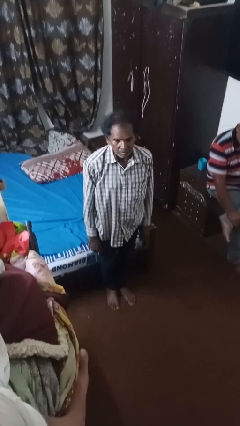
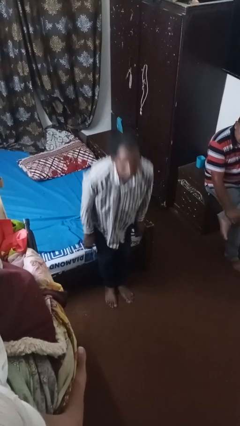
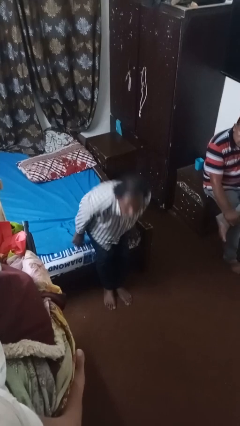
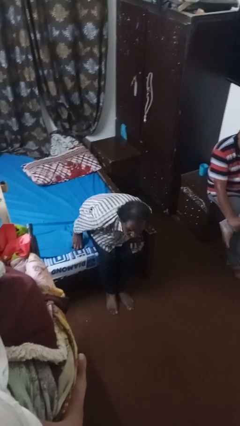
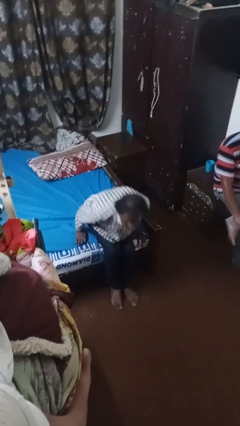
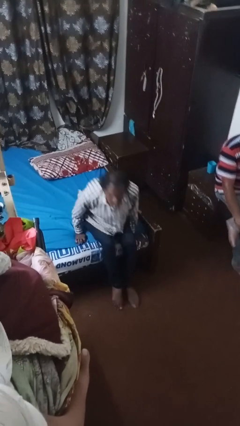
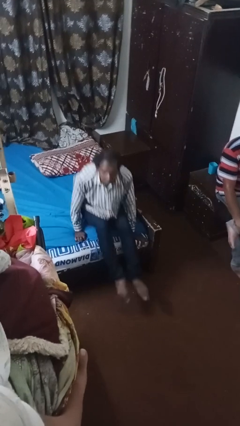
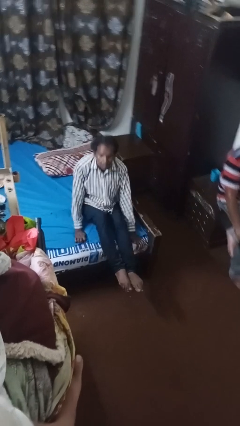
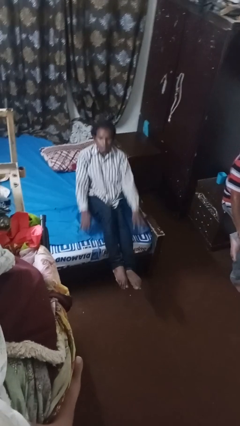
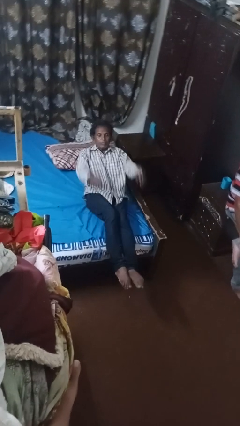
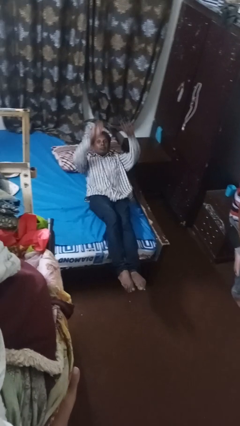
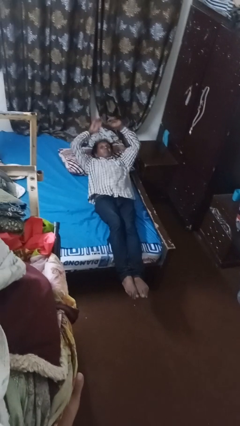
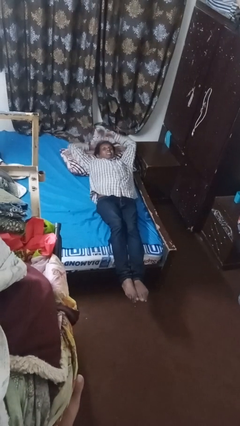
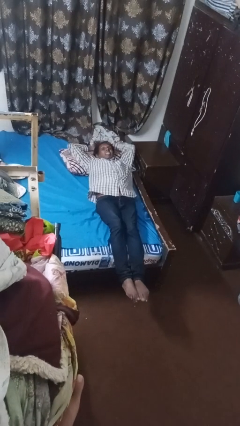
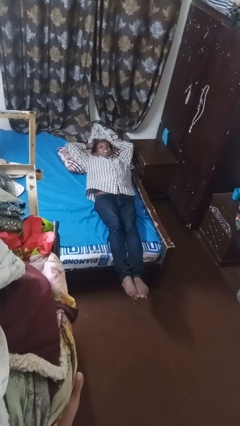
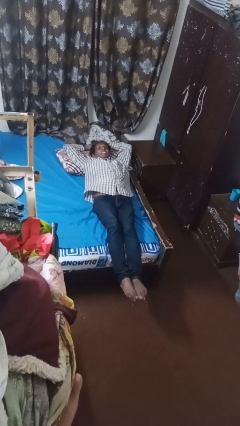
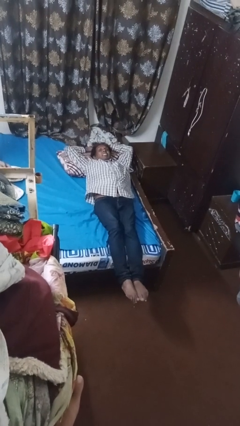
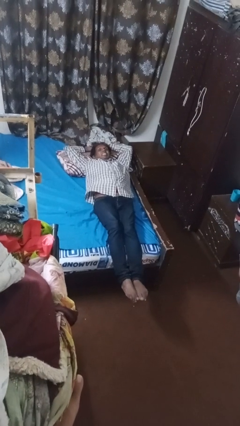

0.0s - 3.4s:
person lies down on bed

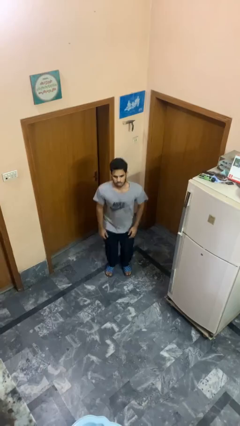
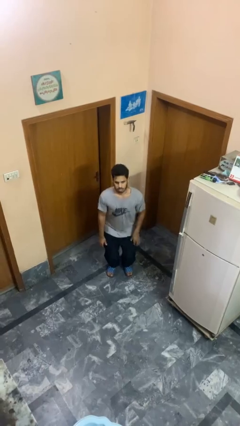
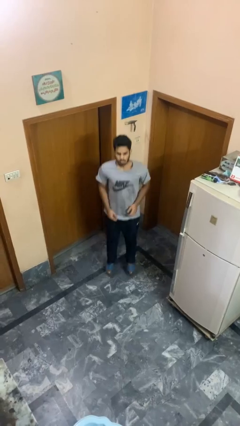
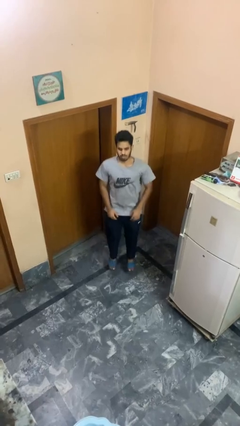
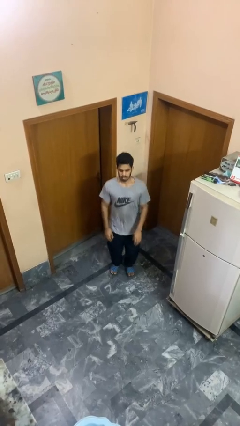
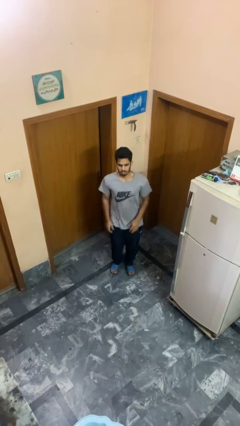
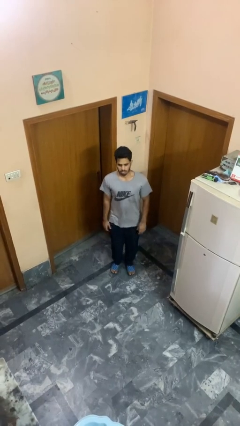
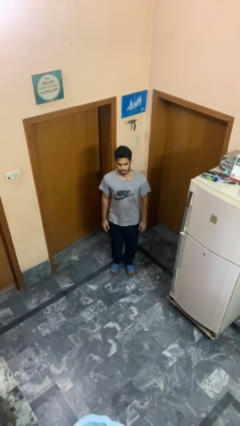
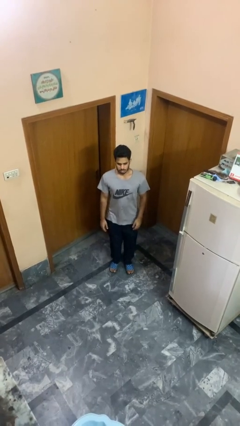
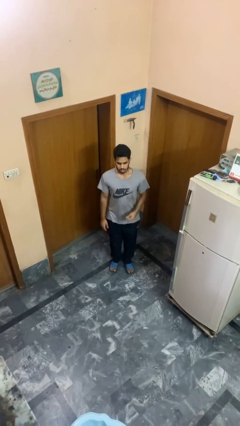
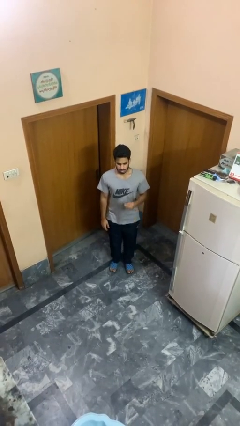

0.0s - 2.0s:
person jumps

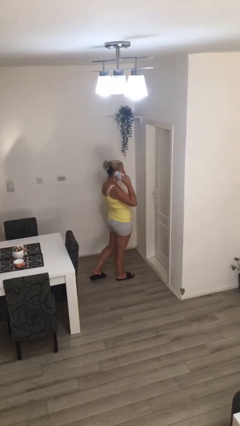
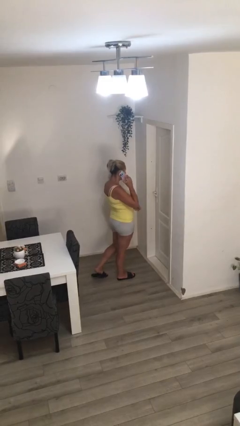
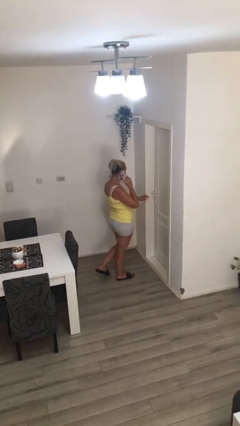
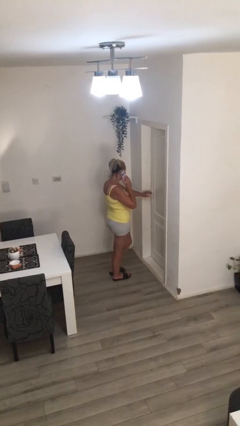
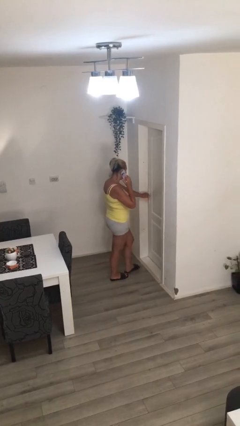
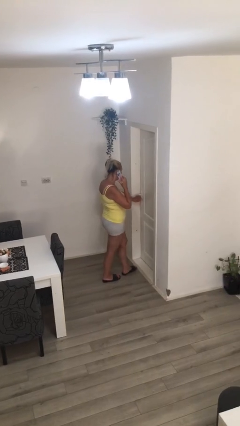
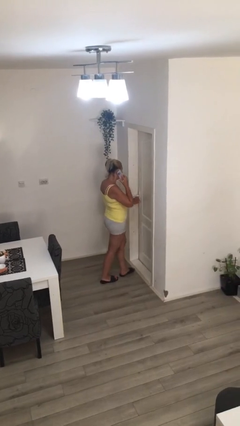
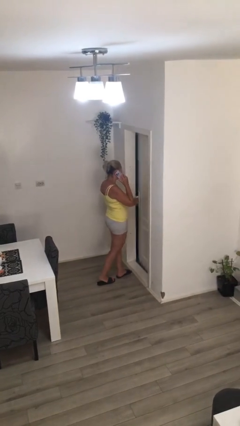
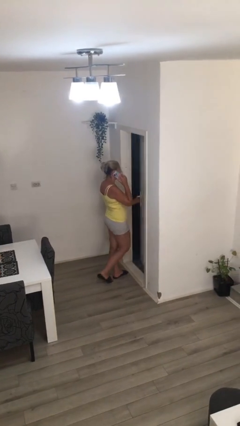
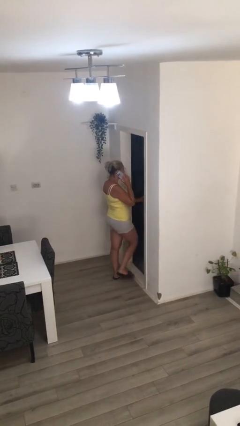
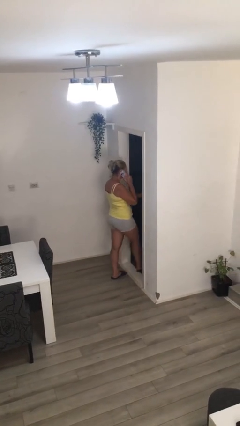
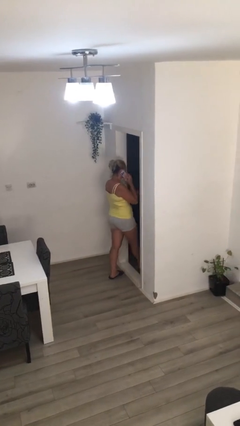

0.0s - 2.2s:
person opens facility door

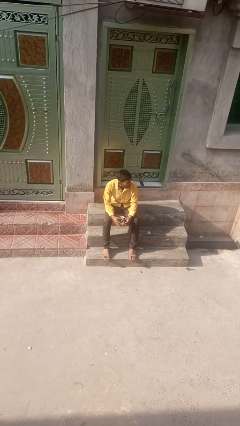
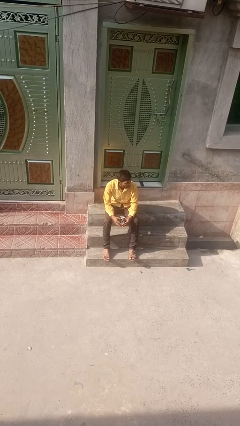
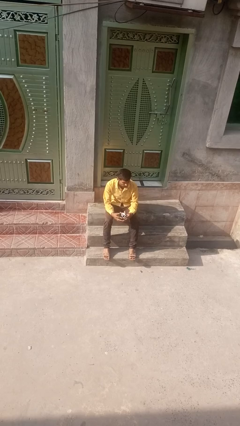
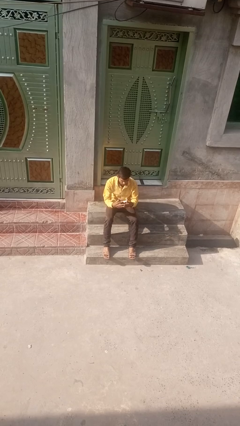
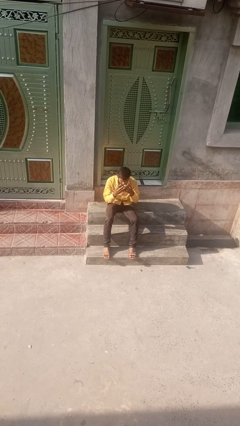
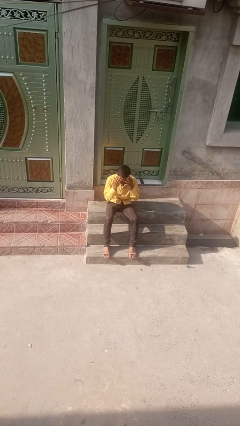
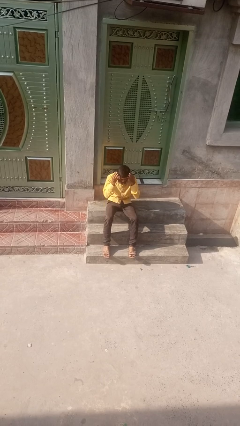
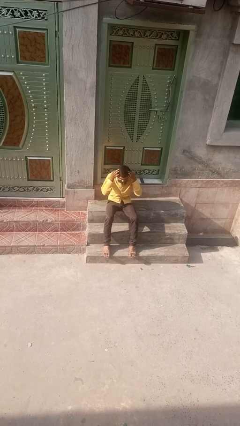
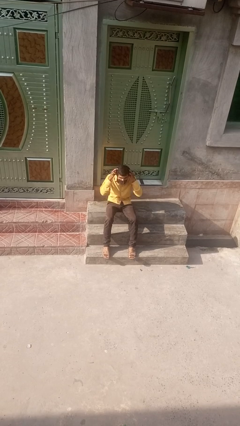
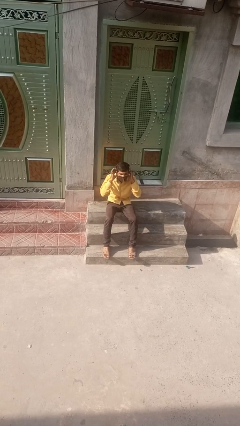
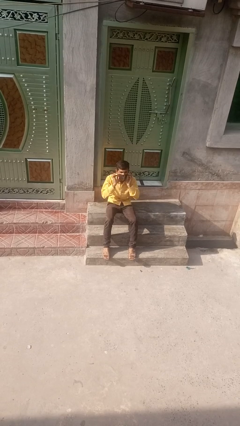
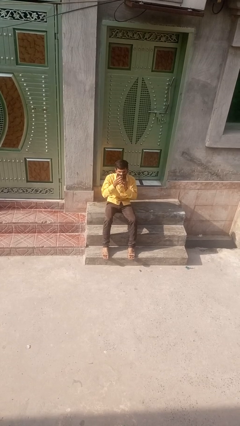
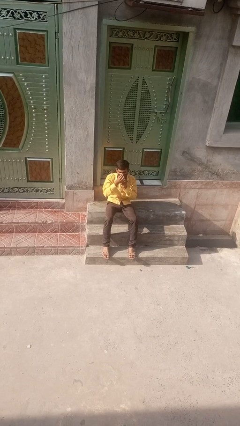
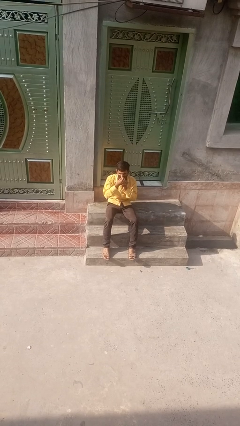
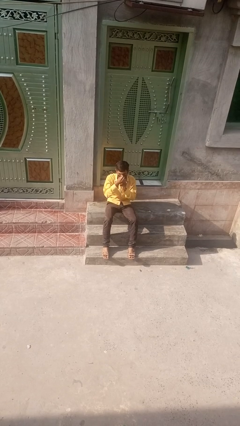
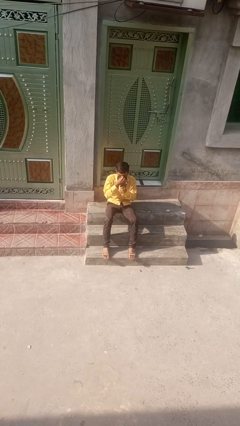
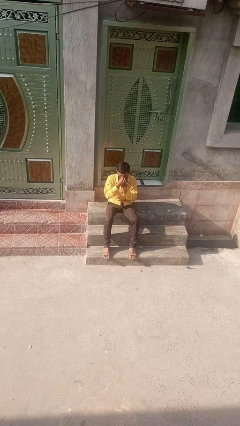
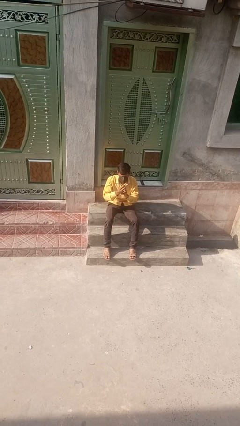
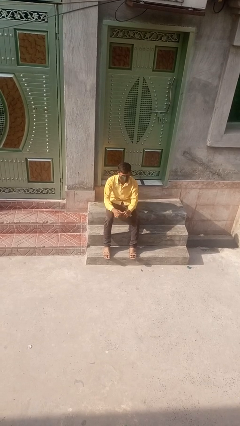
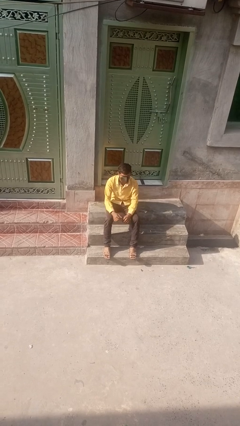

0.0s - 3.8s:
person puts on facemask

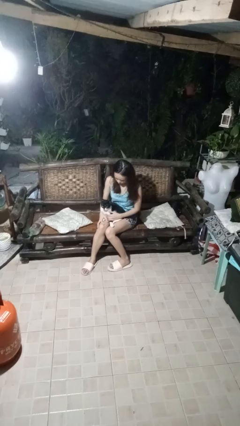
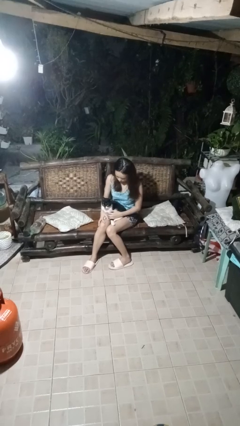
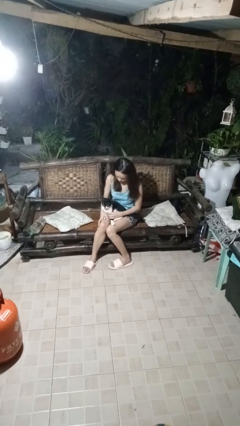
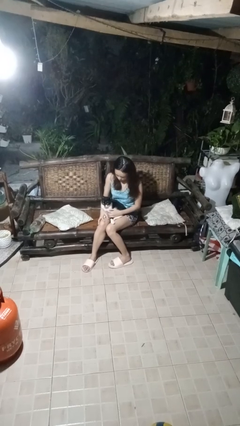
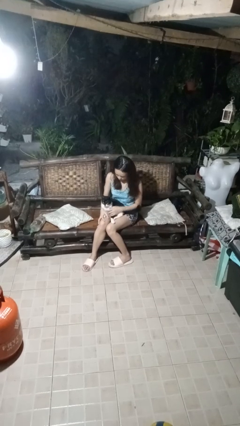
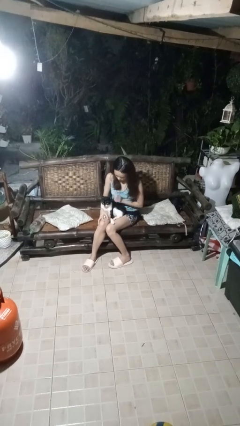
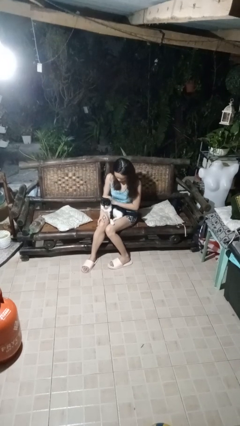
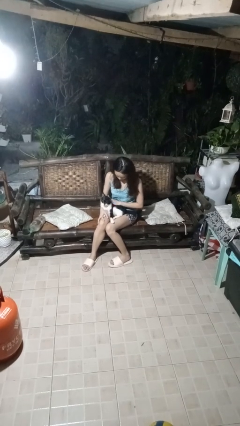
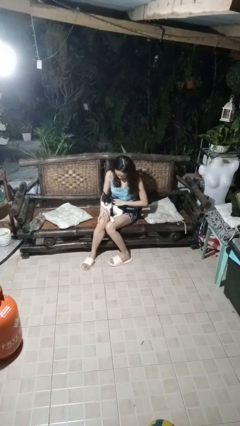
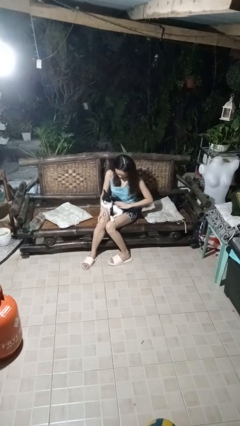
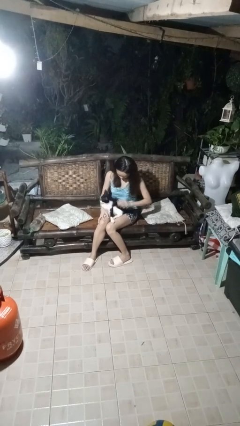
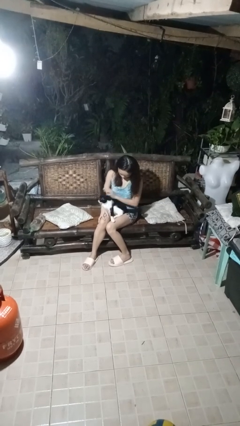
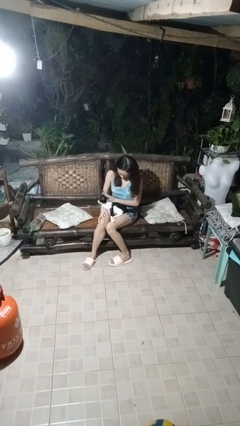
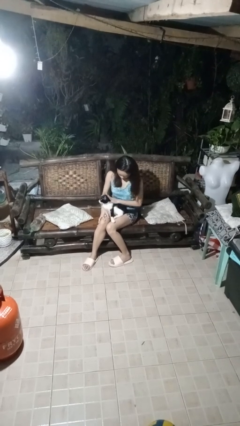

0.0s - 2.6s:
person pets cat

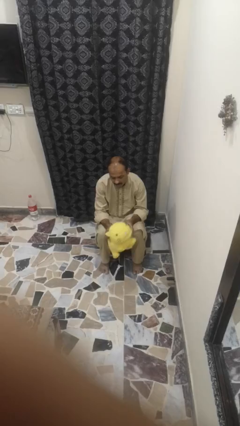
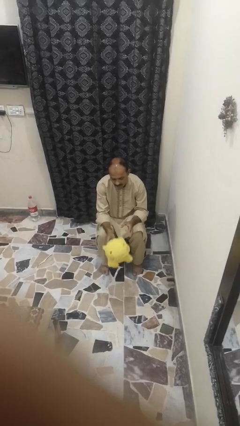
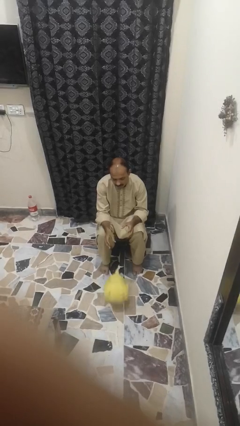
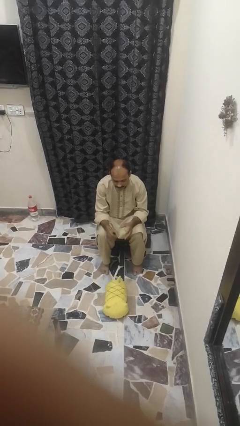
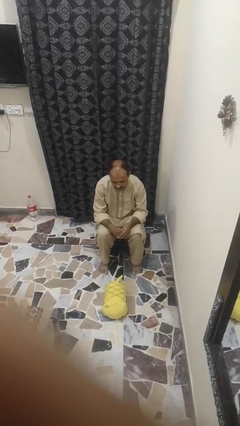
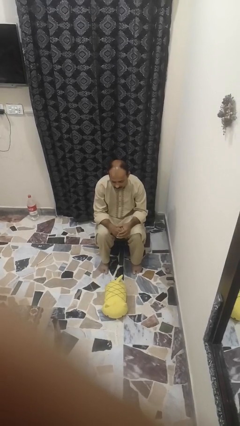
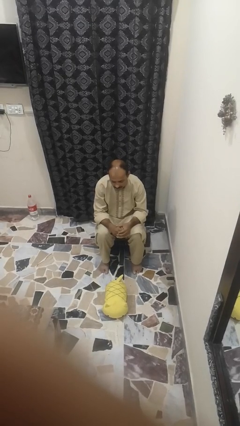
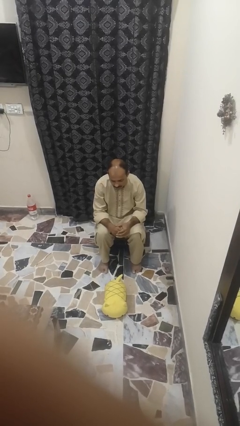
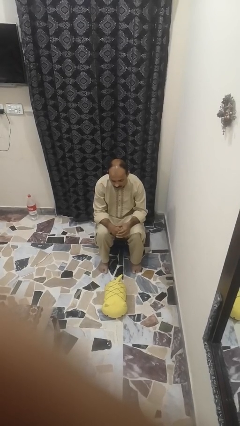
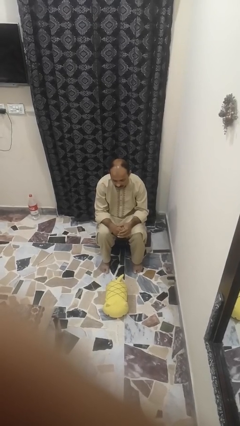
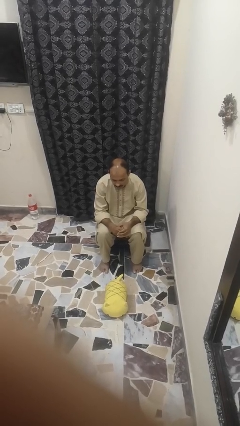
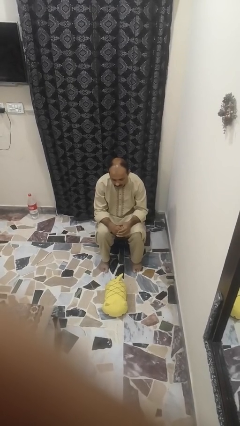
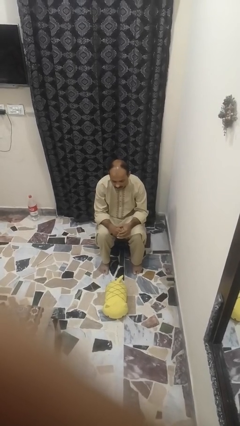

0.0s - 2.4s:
person drops object

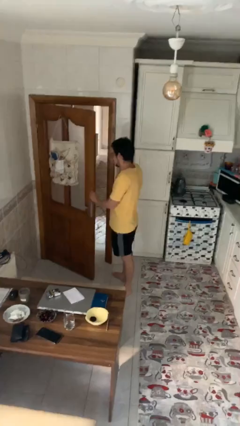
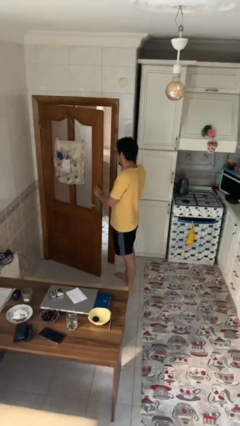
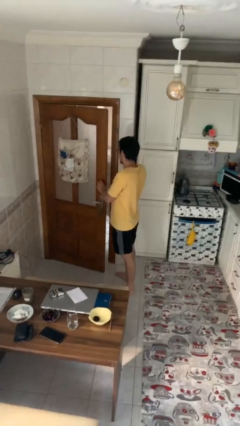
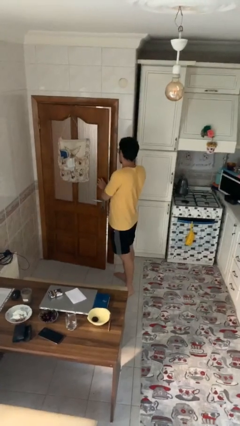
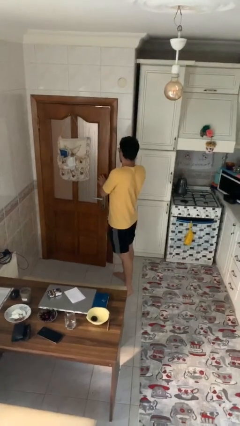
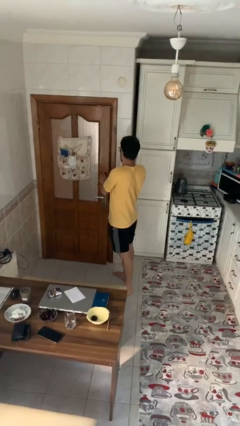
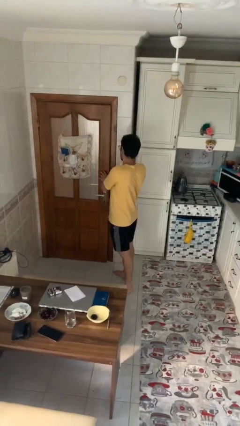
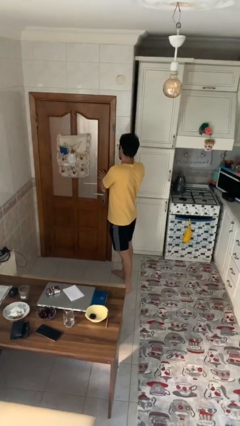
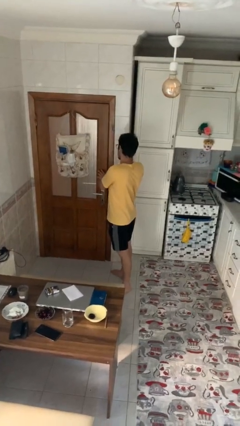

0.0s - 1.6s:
person closes facility door
